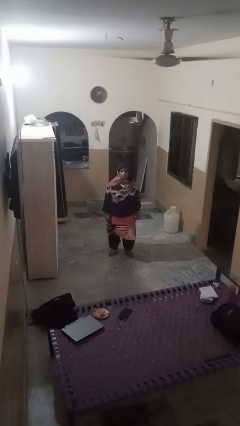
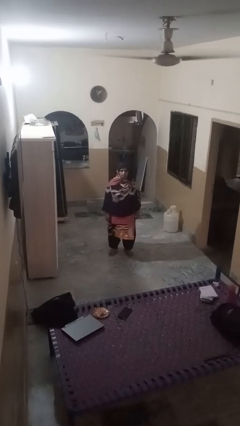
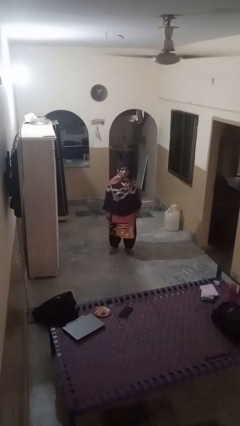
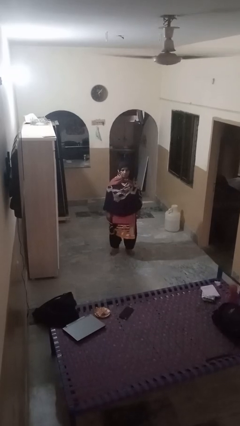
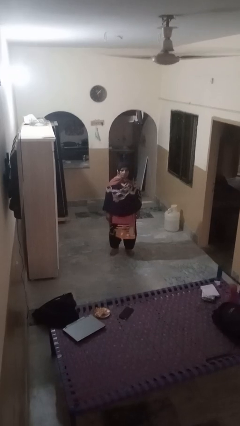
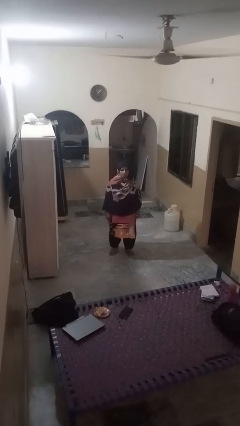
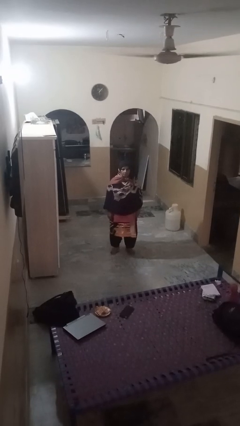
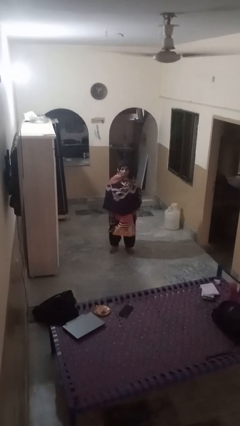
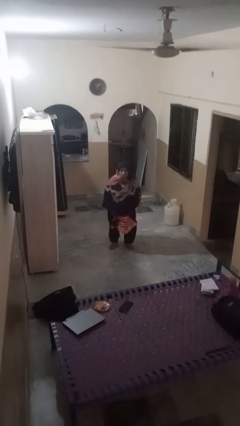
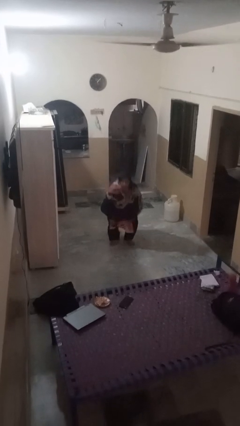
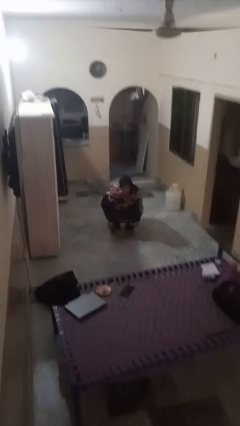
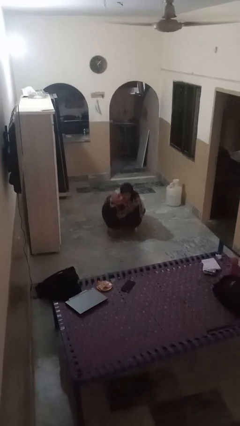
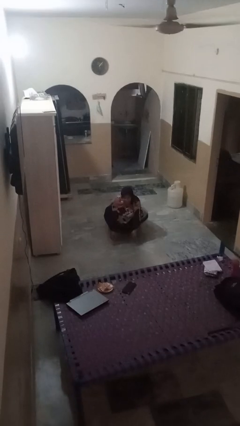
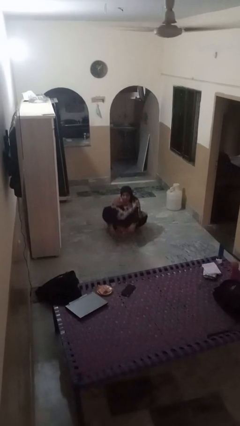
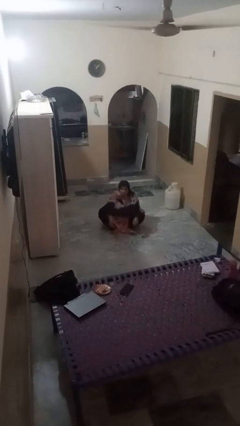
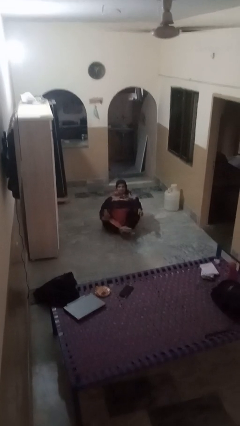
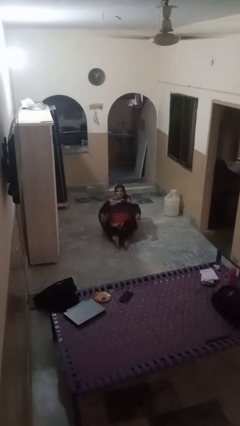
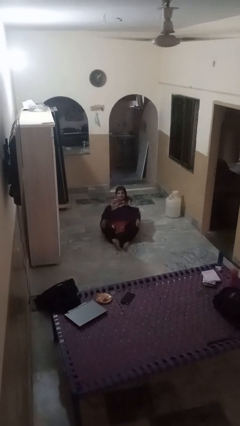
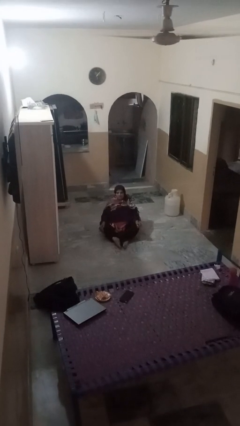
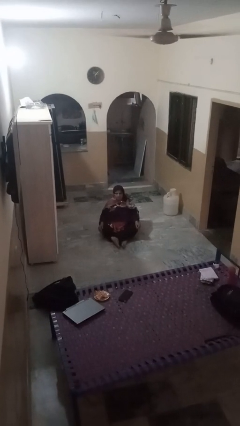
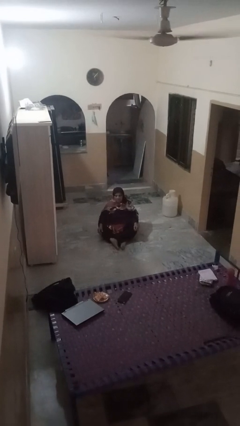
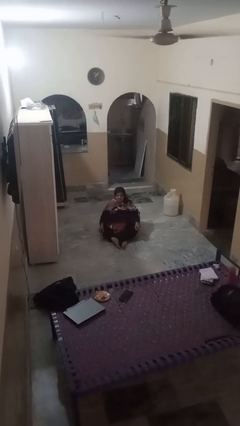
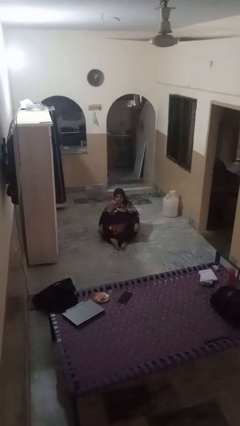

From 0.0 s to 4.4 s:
person sits crisscross

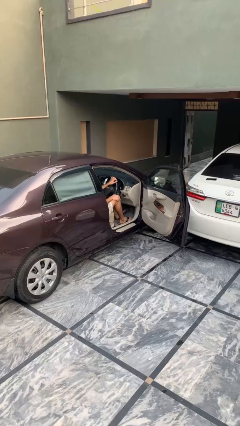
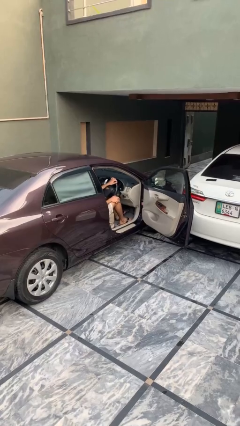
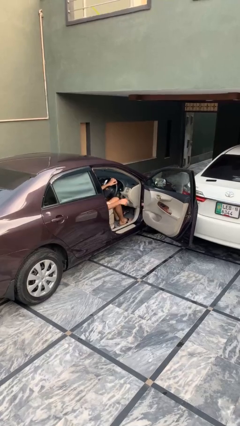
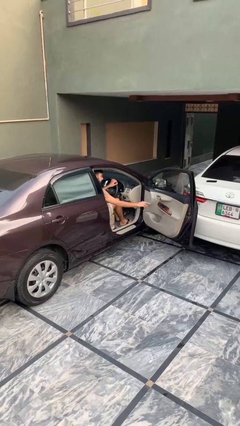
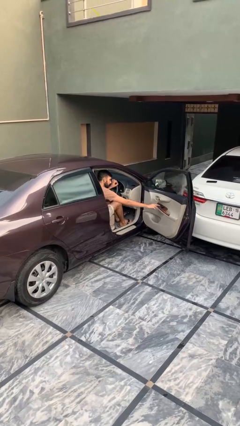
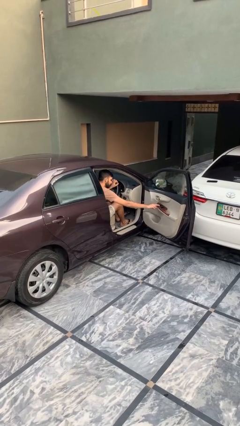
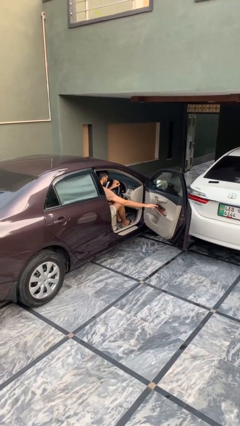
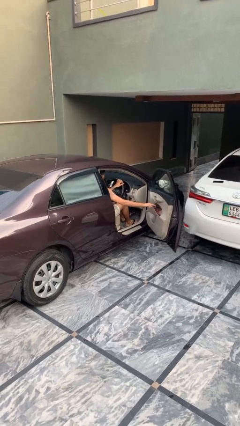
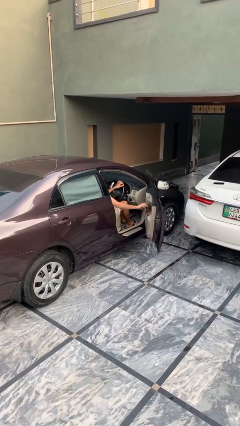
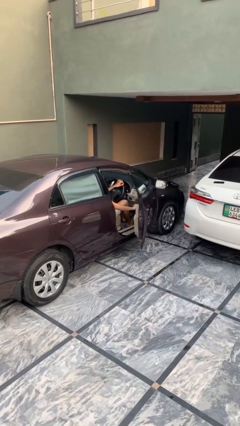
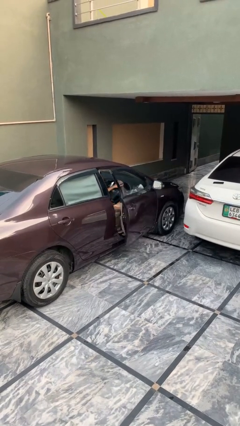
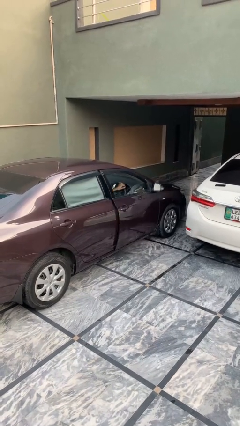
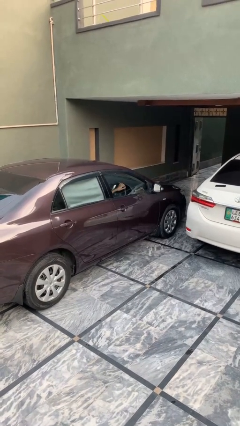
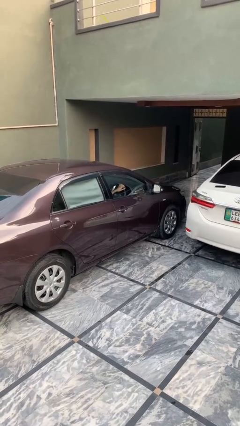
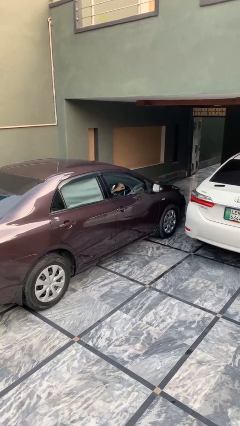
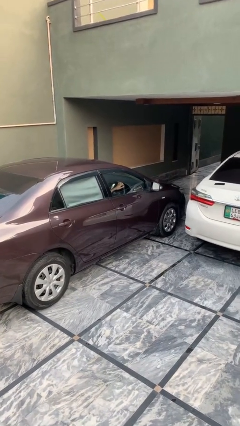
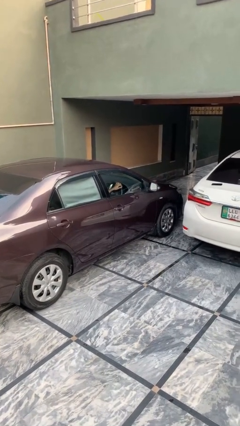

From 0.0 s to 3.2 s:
person closes car door

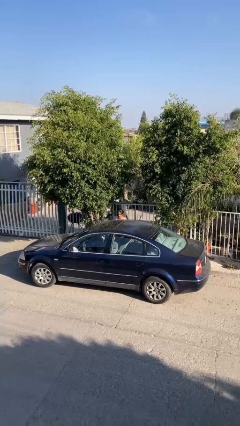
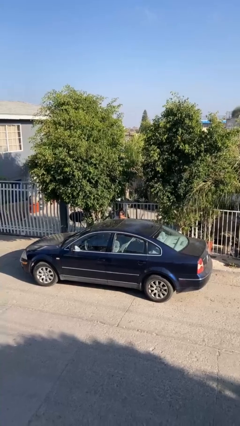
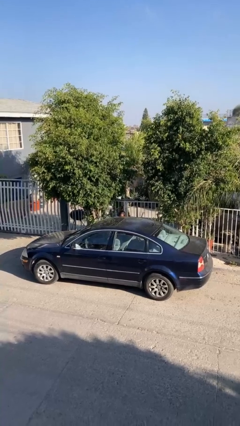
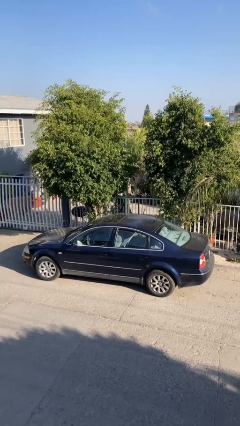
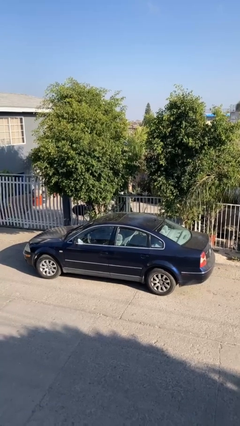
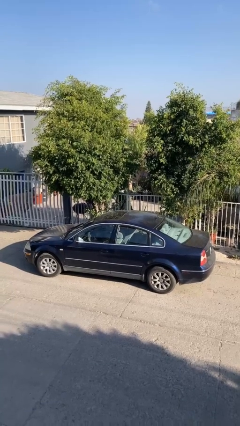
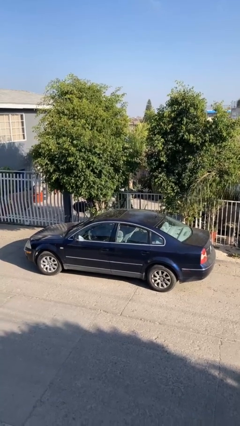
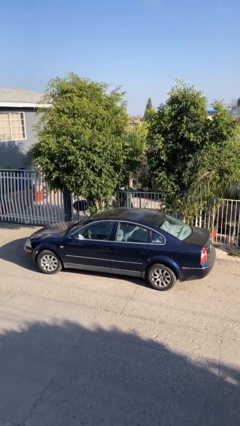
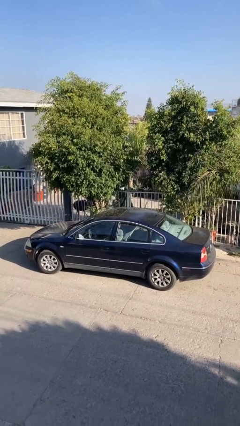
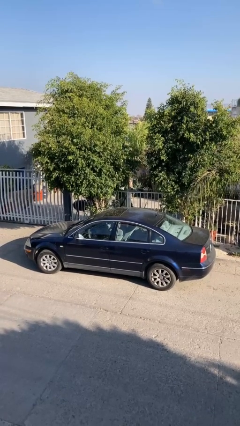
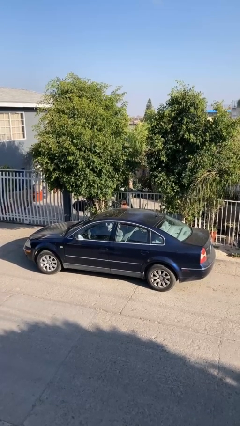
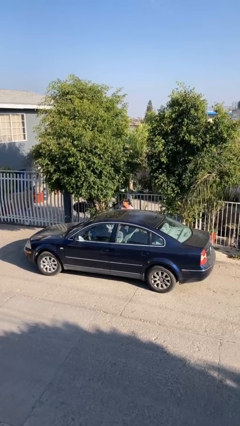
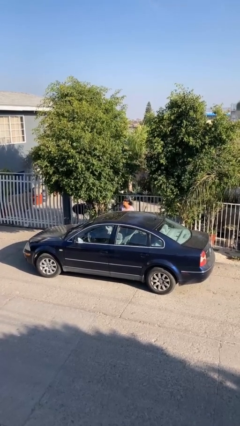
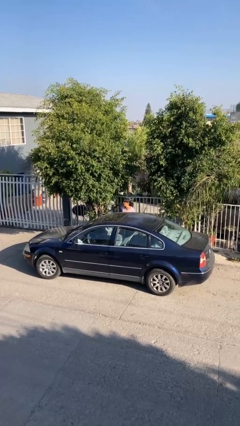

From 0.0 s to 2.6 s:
person loads car

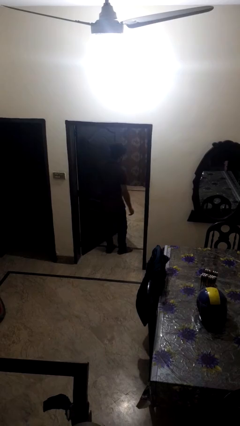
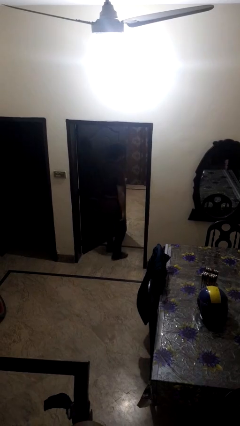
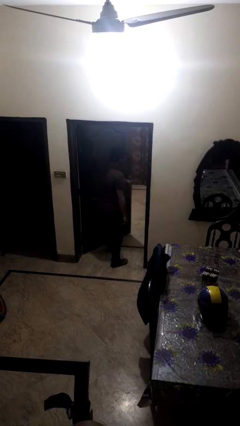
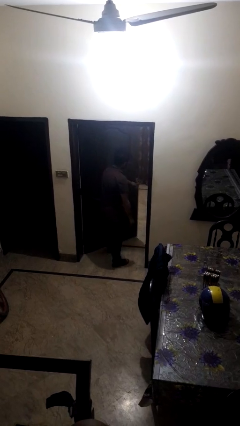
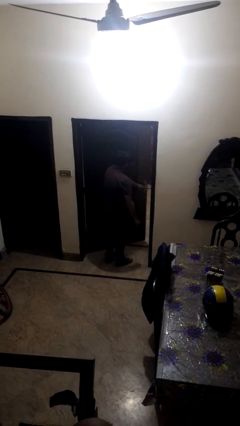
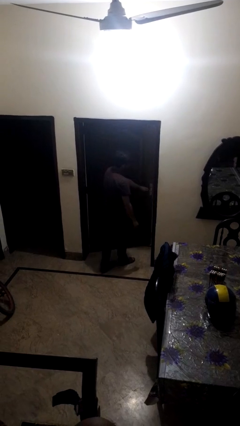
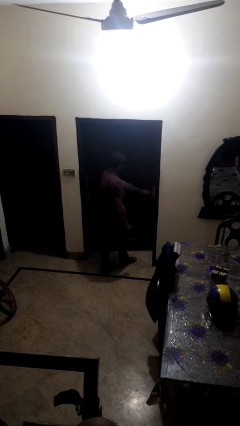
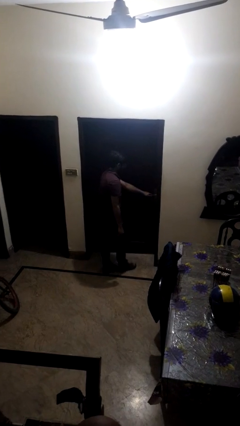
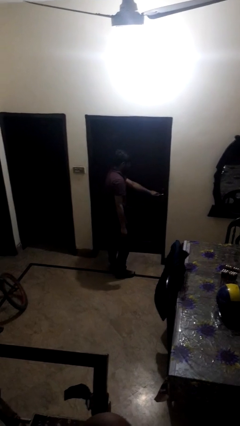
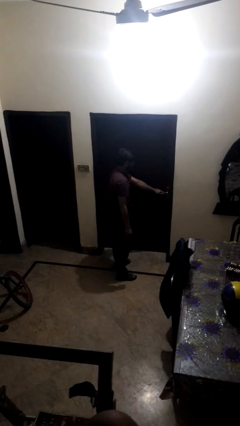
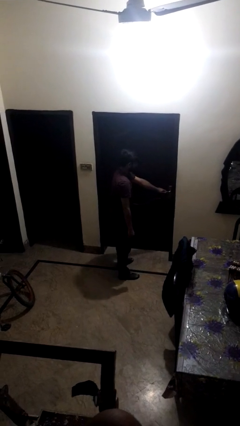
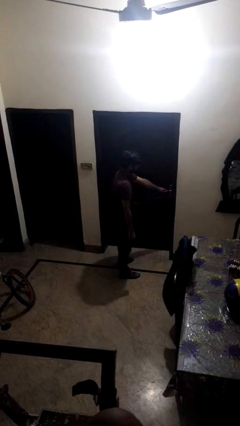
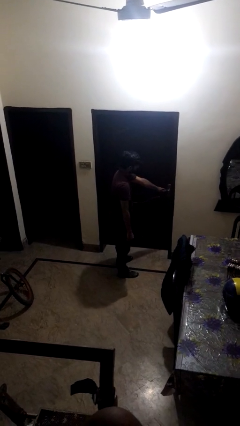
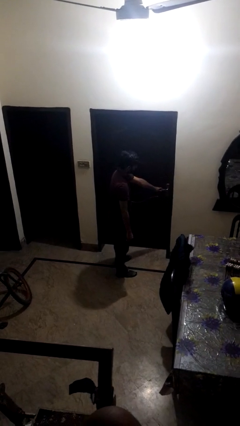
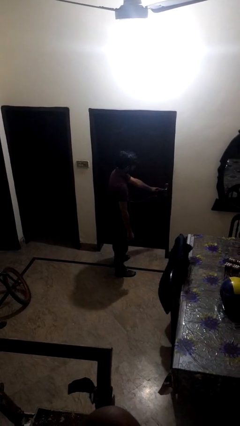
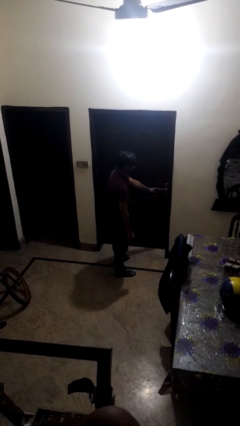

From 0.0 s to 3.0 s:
person closes facility door

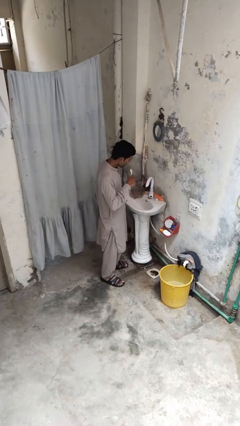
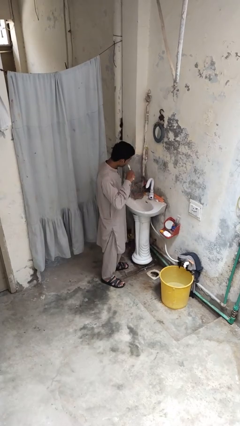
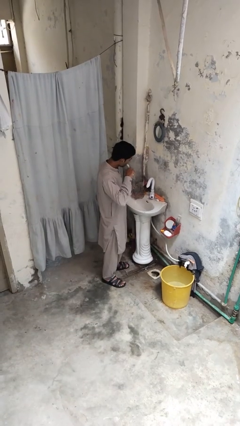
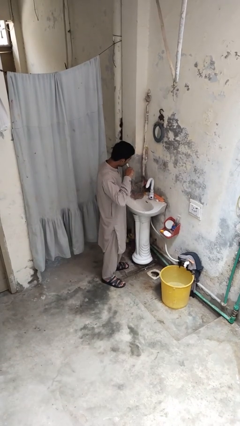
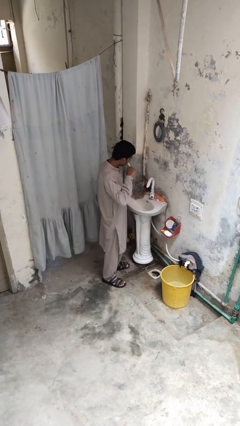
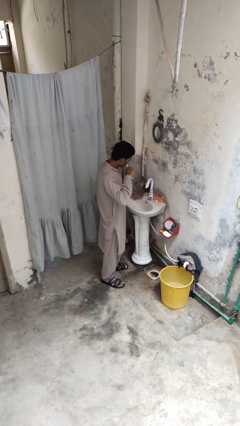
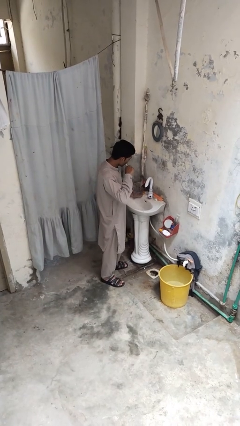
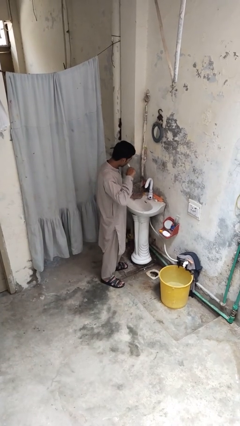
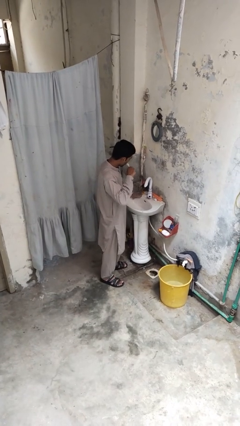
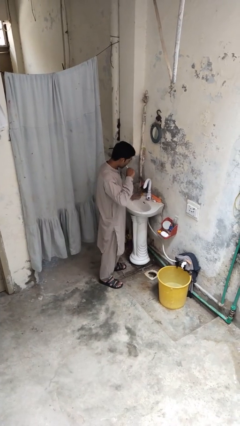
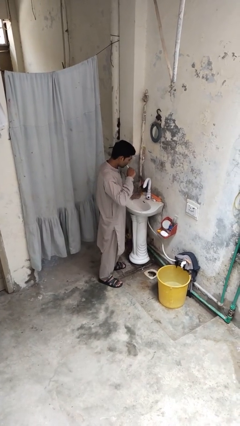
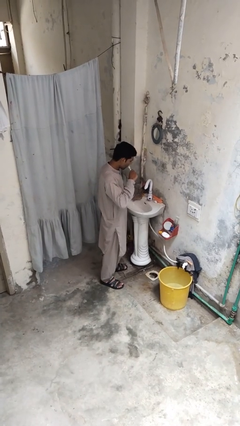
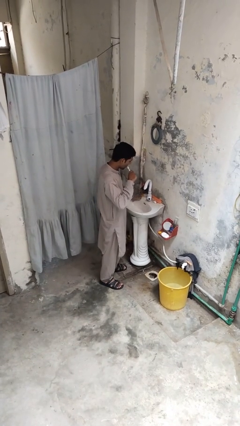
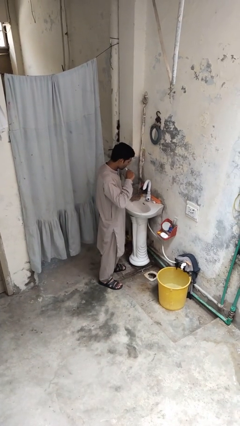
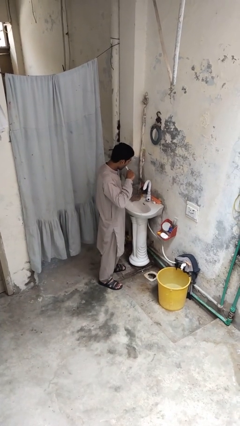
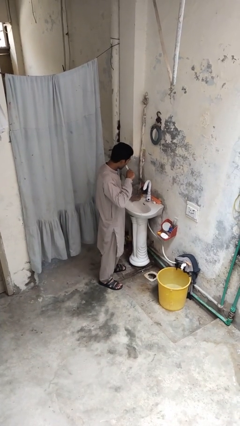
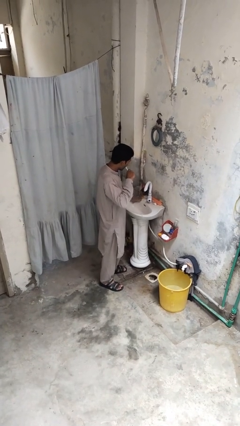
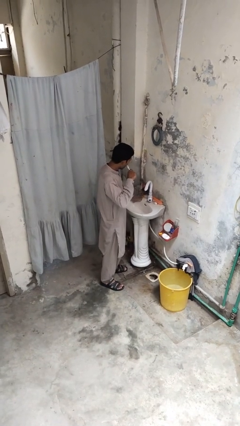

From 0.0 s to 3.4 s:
person brushes teeth

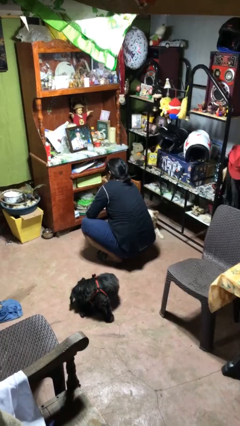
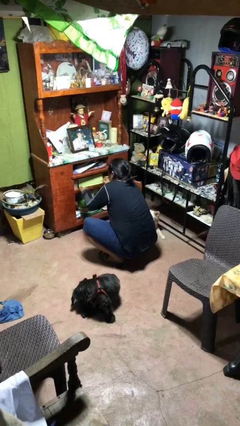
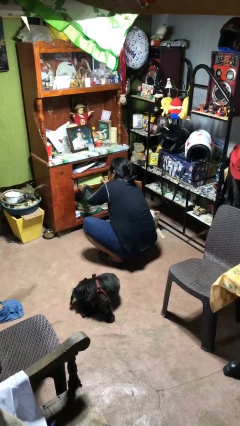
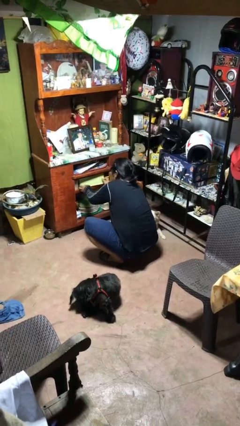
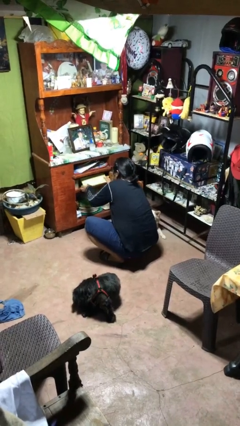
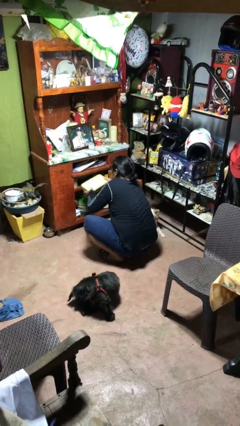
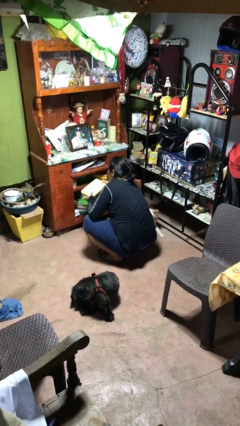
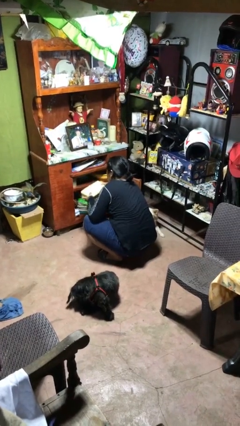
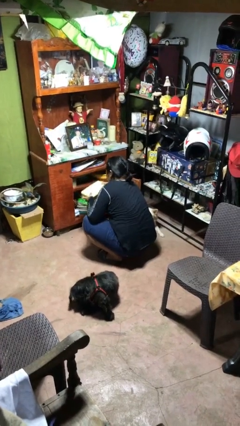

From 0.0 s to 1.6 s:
person picks up object from cabinet
